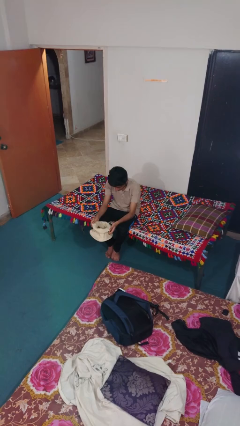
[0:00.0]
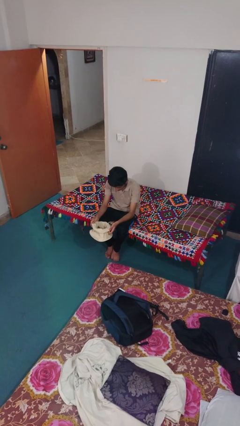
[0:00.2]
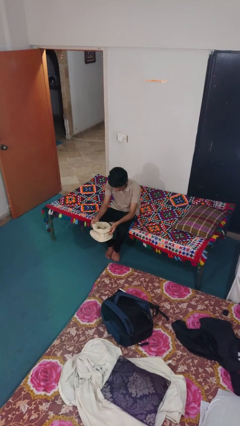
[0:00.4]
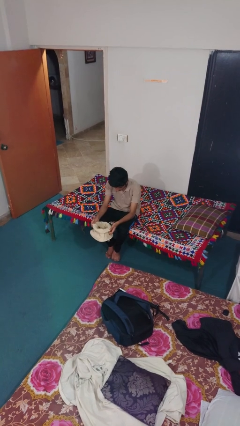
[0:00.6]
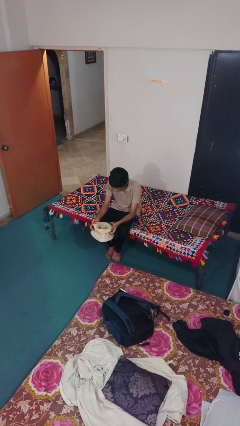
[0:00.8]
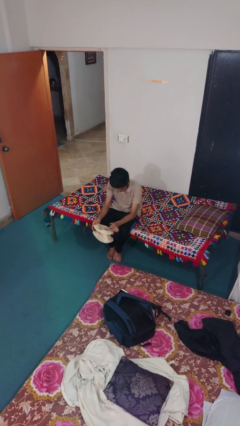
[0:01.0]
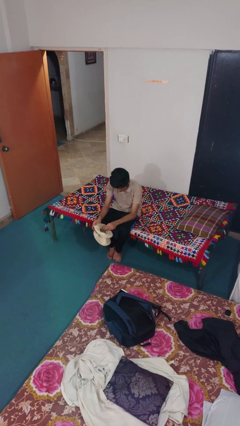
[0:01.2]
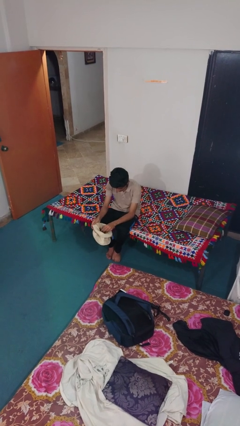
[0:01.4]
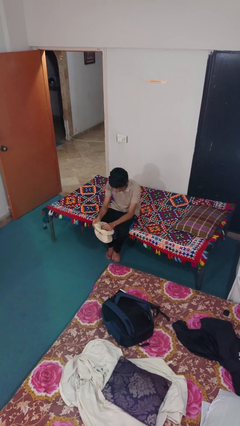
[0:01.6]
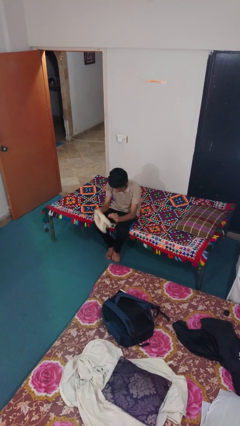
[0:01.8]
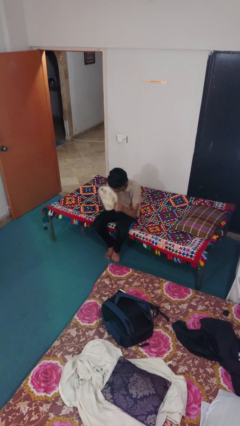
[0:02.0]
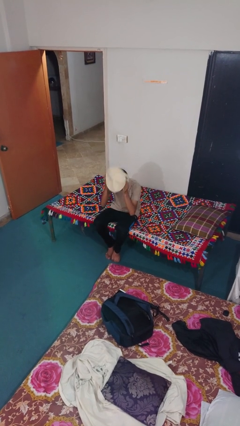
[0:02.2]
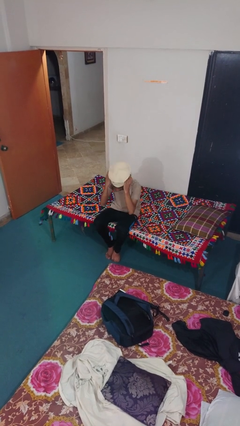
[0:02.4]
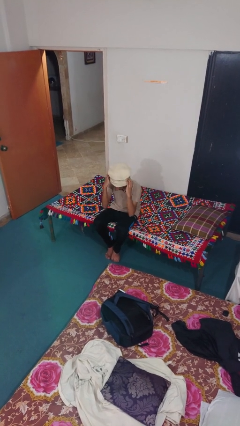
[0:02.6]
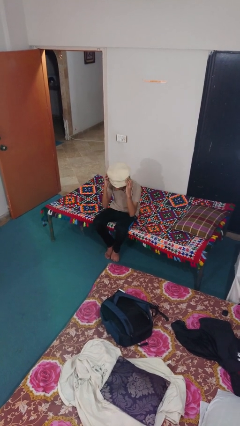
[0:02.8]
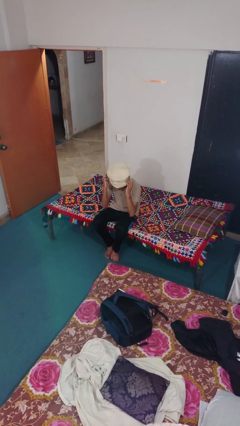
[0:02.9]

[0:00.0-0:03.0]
person puts on hat

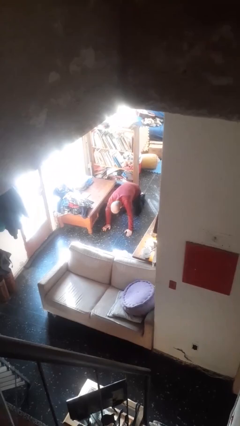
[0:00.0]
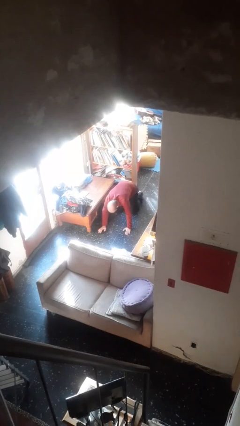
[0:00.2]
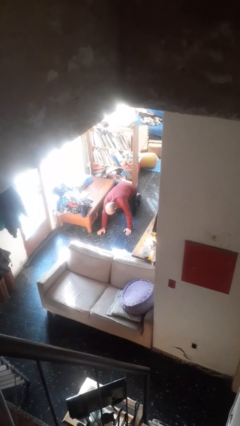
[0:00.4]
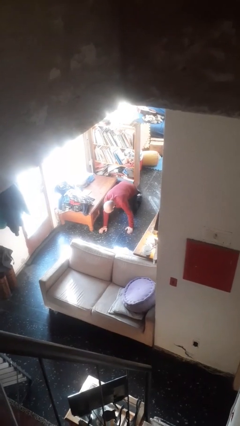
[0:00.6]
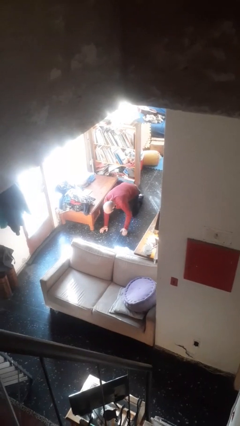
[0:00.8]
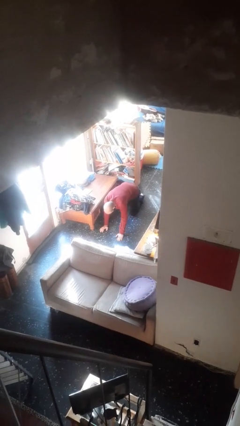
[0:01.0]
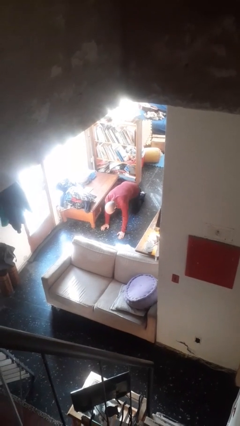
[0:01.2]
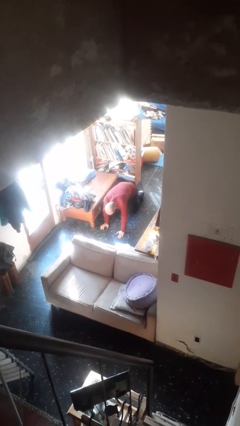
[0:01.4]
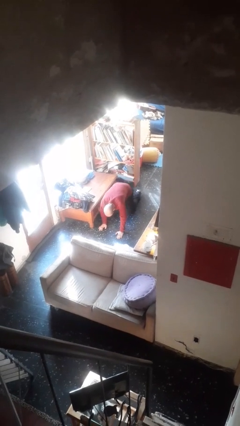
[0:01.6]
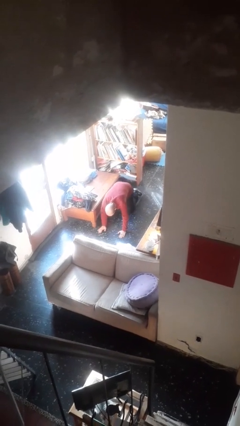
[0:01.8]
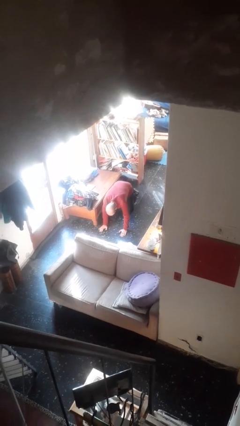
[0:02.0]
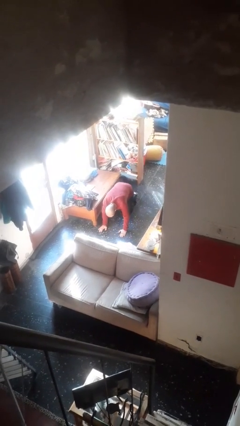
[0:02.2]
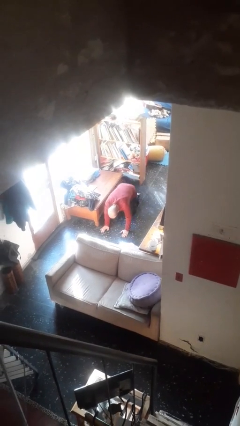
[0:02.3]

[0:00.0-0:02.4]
person crawls

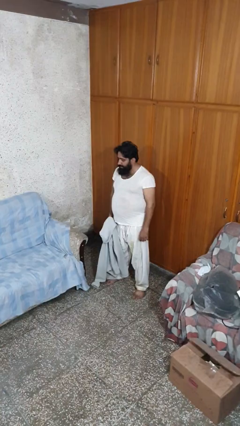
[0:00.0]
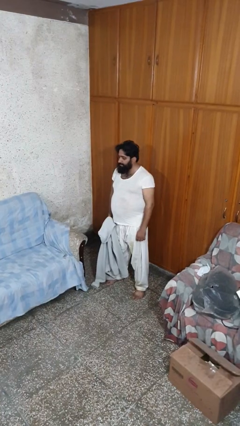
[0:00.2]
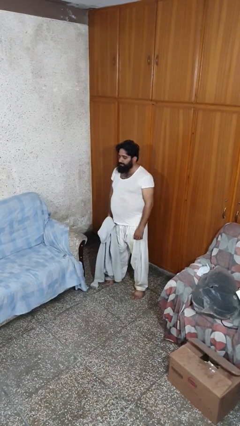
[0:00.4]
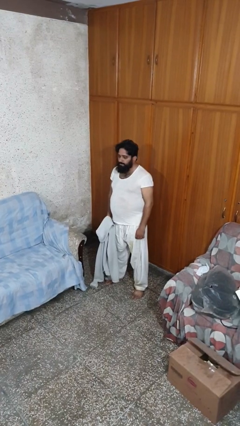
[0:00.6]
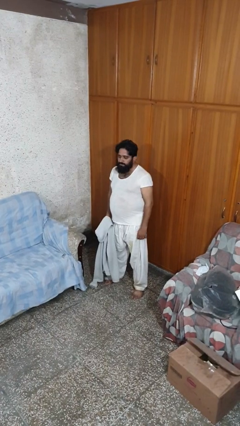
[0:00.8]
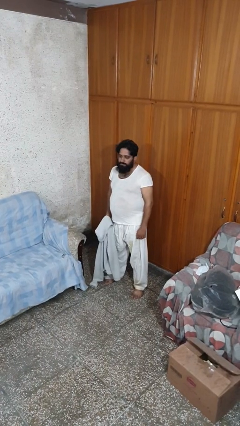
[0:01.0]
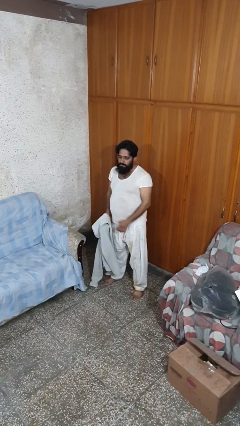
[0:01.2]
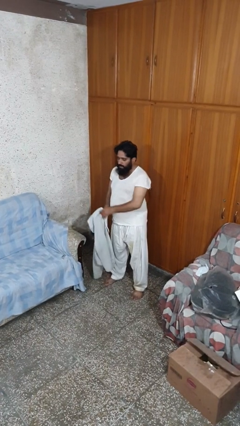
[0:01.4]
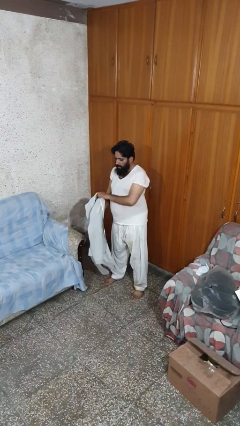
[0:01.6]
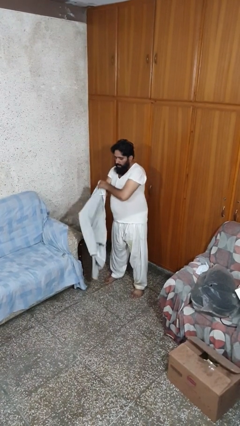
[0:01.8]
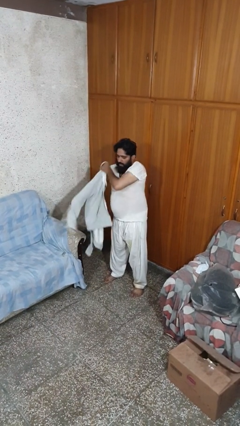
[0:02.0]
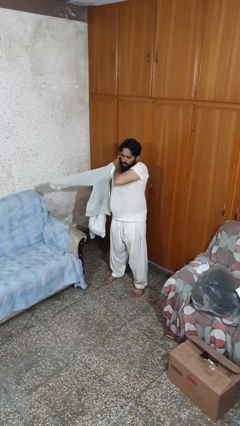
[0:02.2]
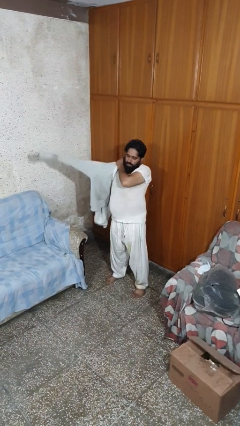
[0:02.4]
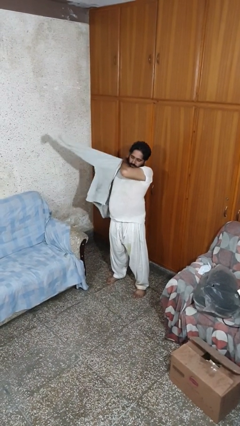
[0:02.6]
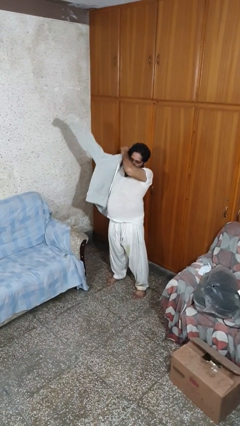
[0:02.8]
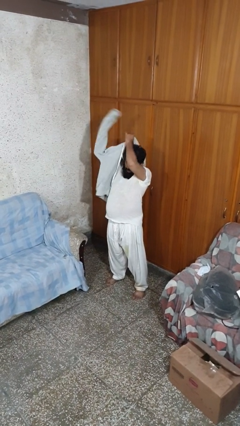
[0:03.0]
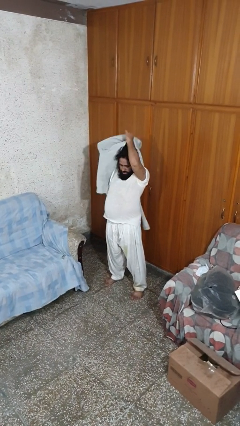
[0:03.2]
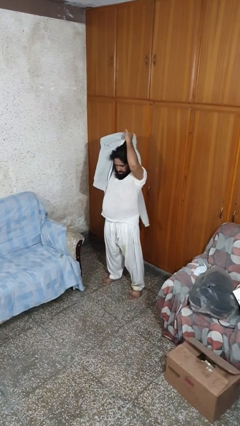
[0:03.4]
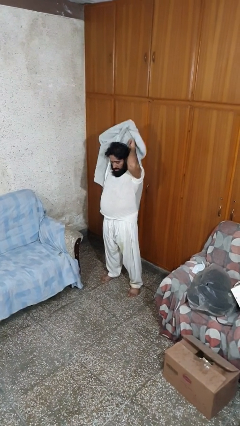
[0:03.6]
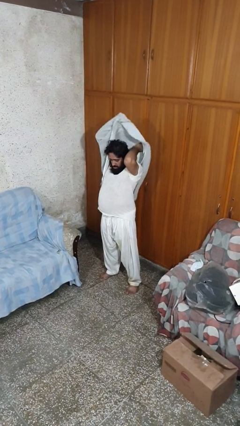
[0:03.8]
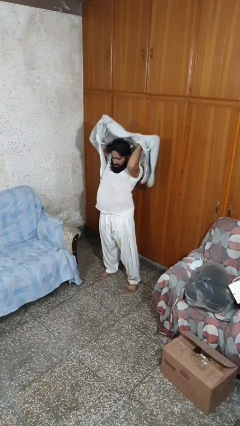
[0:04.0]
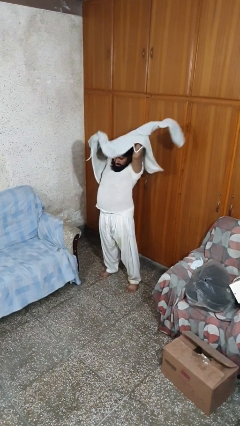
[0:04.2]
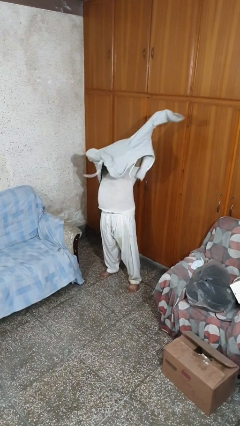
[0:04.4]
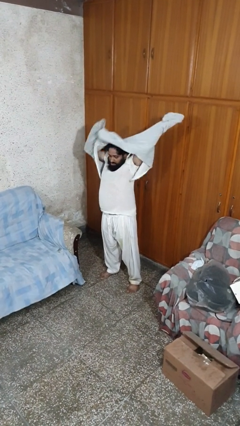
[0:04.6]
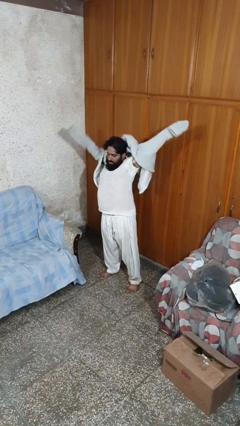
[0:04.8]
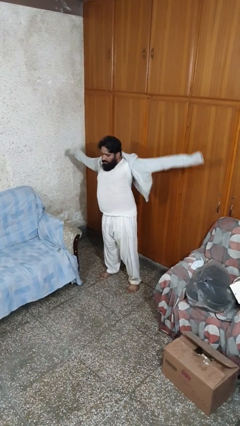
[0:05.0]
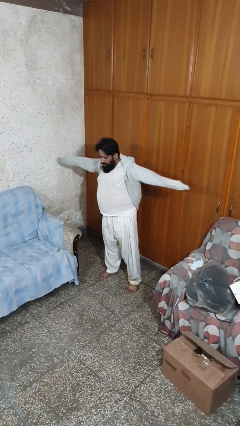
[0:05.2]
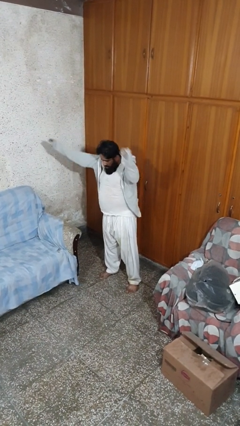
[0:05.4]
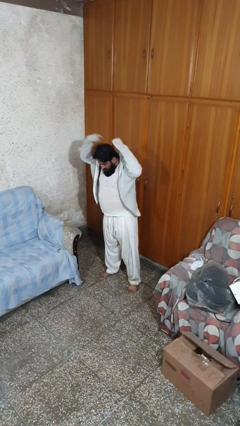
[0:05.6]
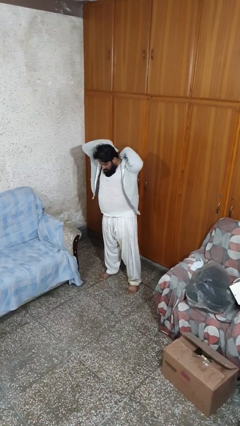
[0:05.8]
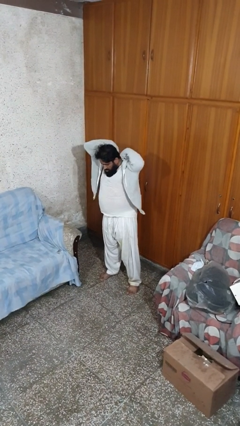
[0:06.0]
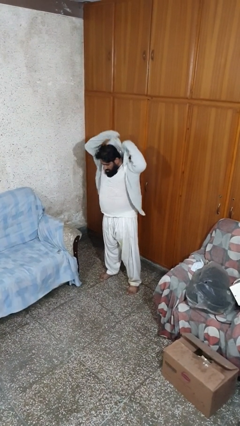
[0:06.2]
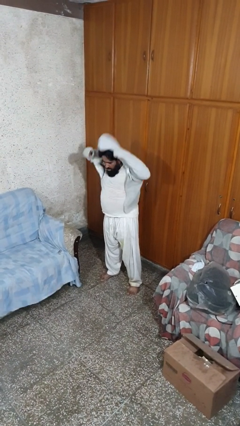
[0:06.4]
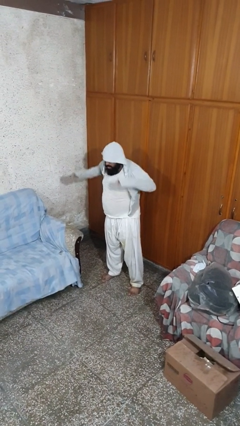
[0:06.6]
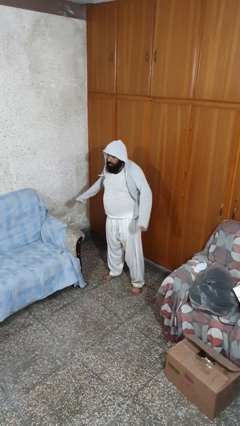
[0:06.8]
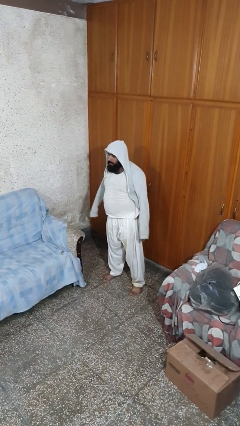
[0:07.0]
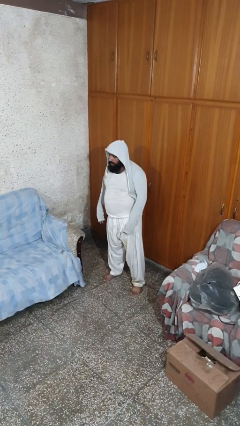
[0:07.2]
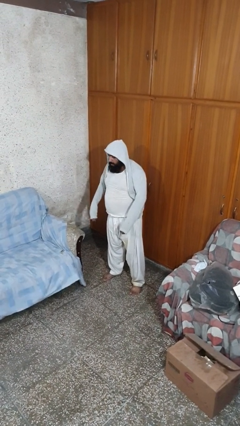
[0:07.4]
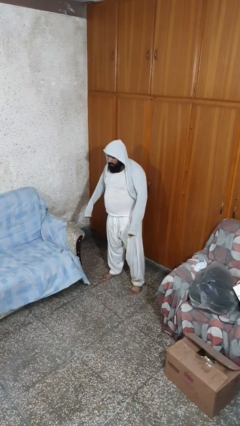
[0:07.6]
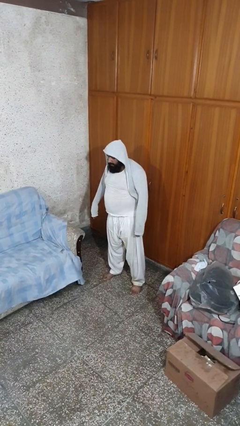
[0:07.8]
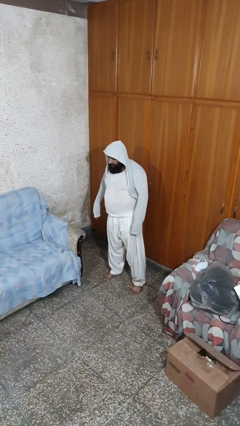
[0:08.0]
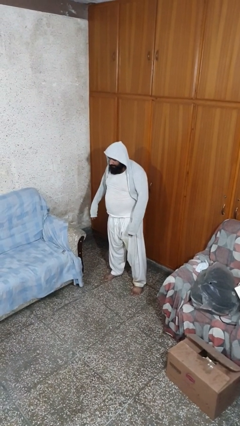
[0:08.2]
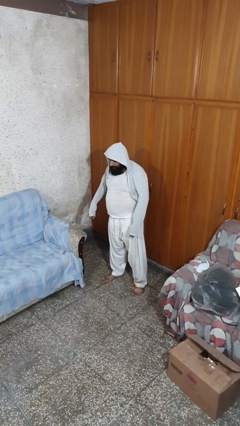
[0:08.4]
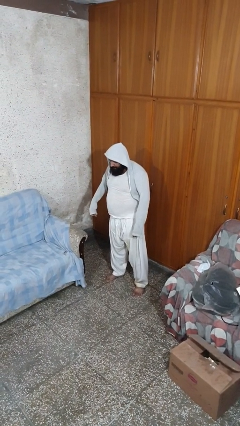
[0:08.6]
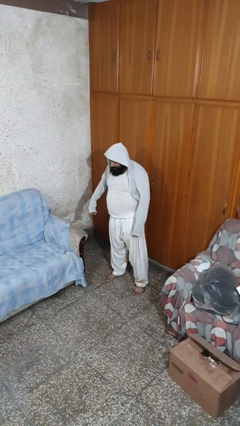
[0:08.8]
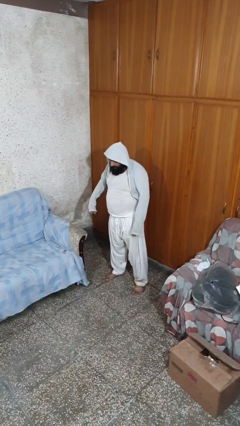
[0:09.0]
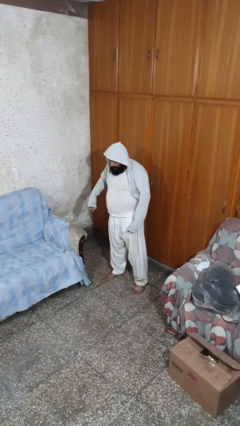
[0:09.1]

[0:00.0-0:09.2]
person puts on hoodie

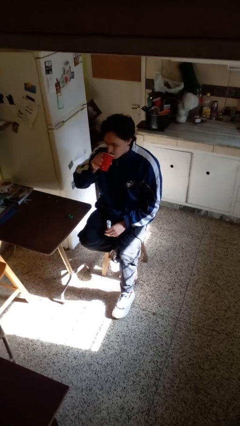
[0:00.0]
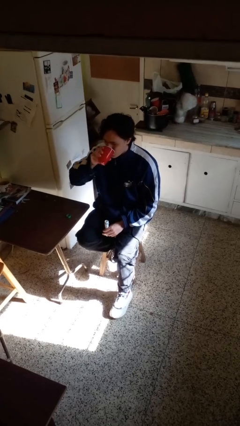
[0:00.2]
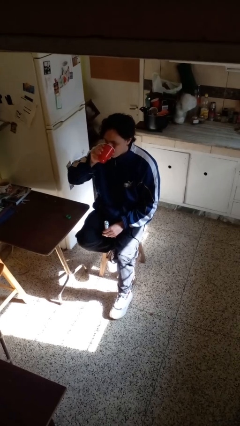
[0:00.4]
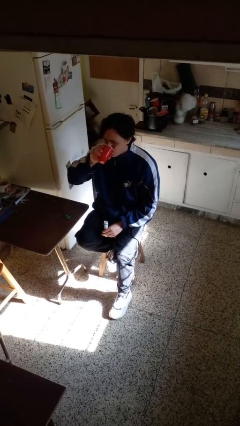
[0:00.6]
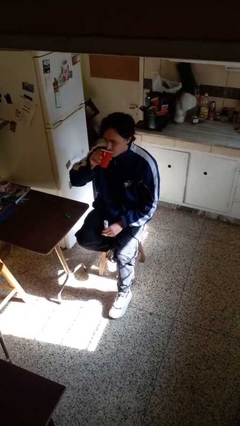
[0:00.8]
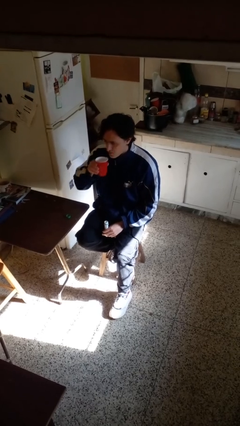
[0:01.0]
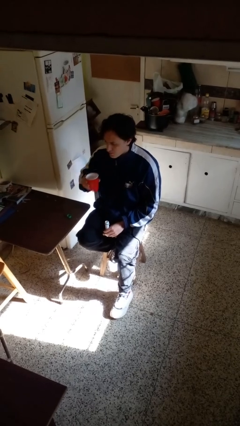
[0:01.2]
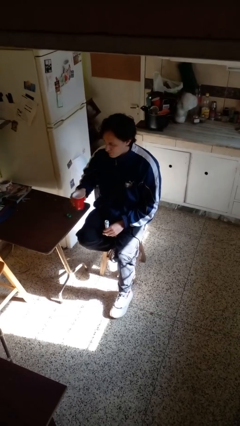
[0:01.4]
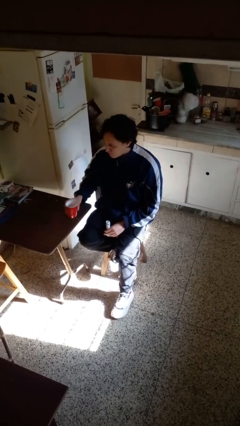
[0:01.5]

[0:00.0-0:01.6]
person drinks from cup

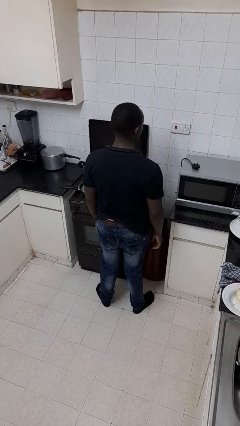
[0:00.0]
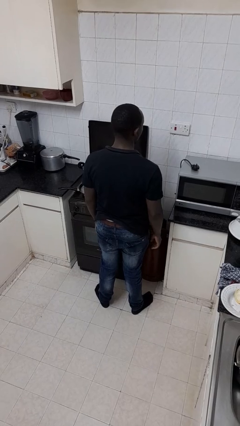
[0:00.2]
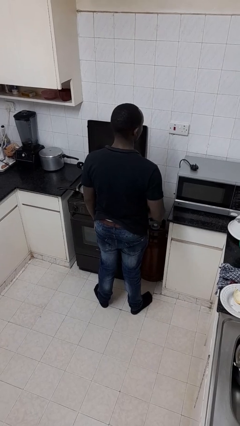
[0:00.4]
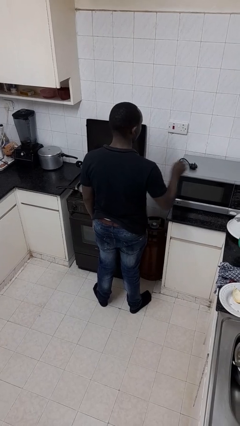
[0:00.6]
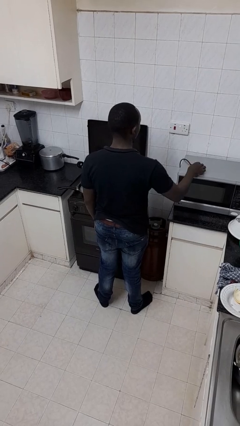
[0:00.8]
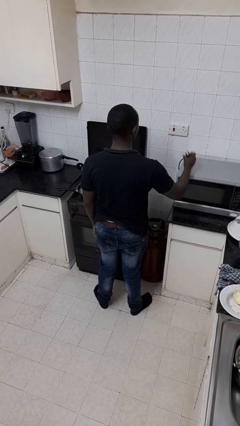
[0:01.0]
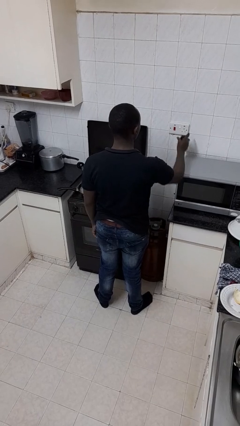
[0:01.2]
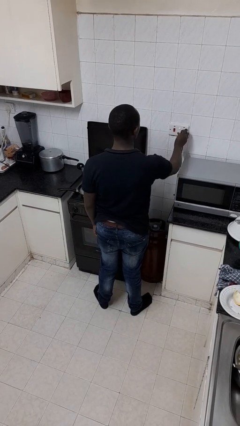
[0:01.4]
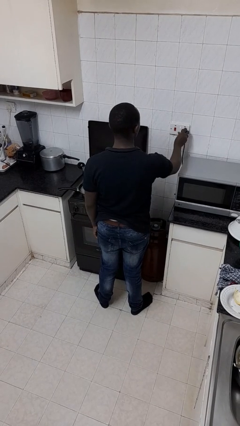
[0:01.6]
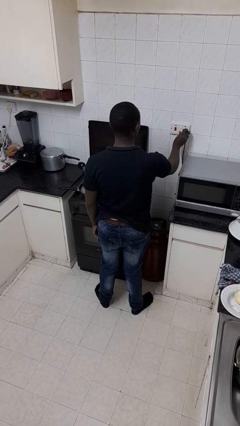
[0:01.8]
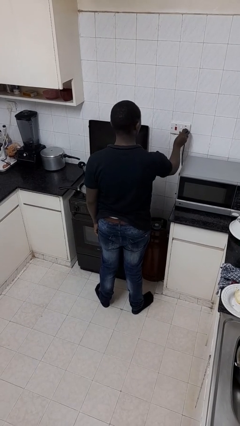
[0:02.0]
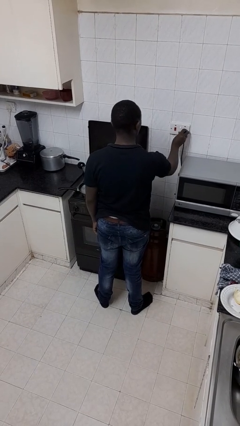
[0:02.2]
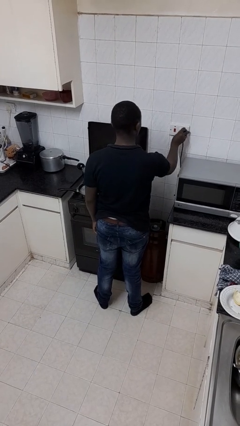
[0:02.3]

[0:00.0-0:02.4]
person plugs into electrical socket
